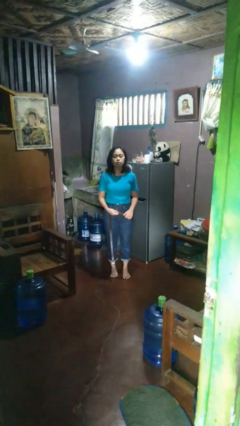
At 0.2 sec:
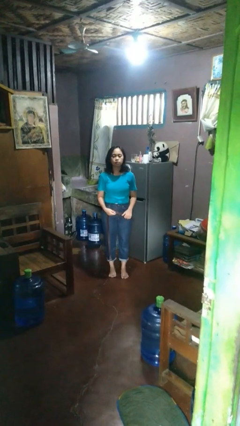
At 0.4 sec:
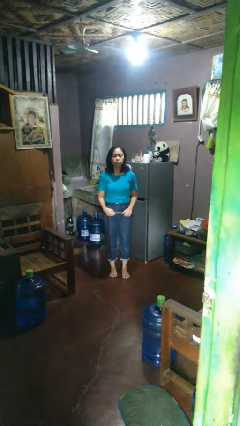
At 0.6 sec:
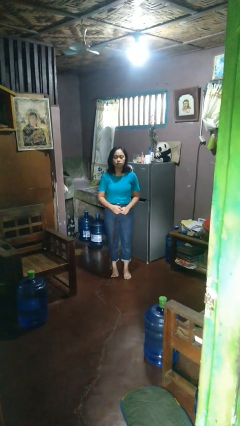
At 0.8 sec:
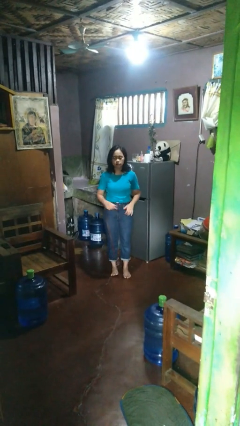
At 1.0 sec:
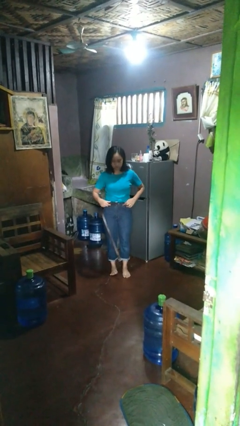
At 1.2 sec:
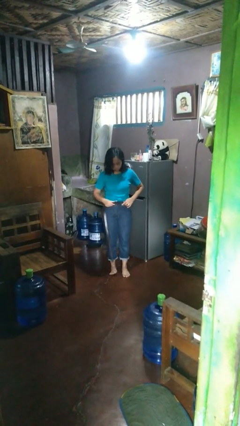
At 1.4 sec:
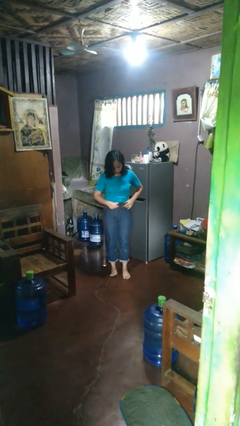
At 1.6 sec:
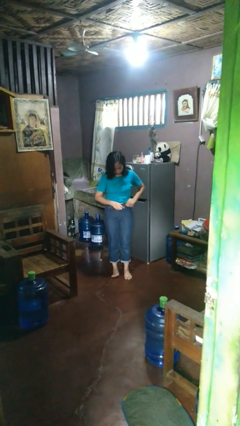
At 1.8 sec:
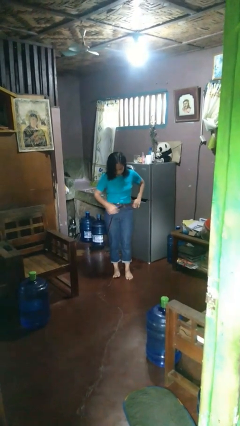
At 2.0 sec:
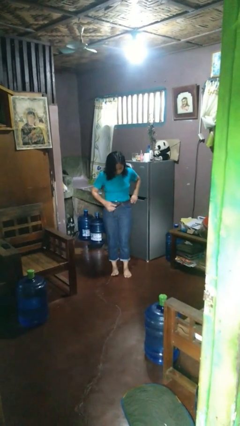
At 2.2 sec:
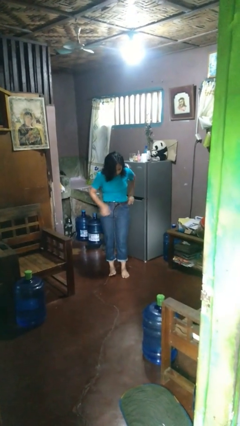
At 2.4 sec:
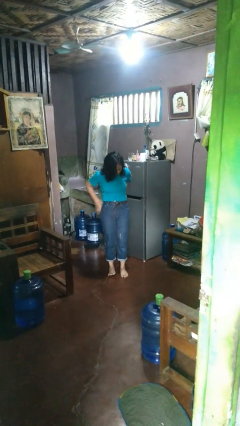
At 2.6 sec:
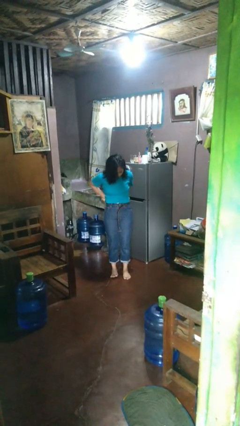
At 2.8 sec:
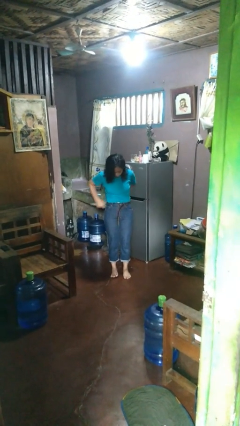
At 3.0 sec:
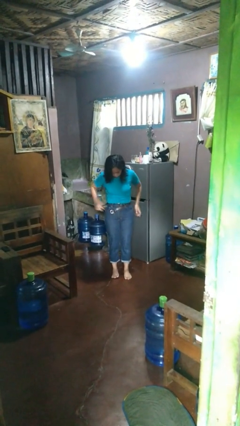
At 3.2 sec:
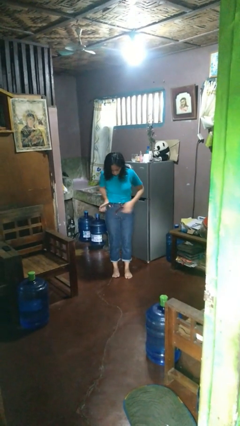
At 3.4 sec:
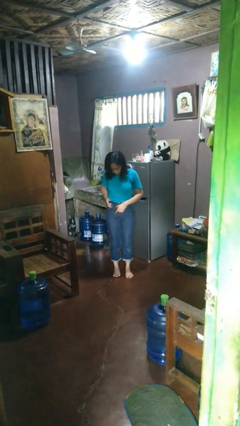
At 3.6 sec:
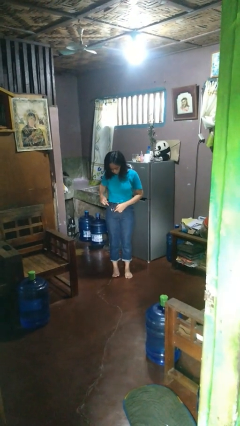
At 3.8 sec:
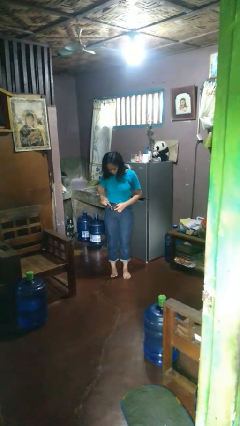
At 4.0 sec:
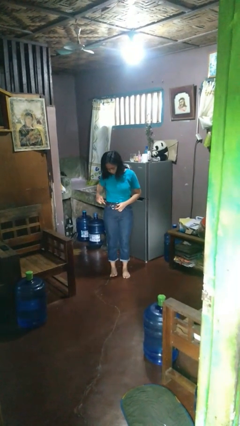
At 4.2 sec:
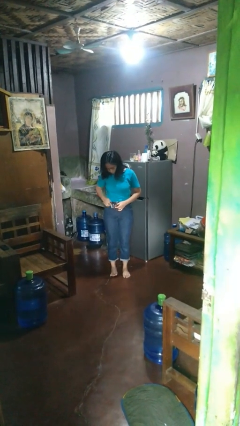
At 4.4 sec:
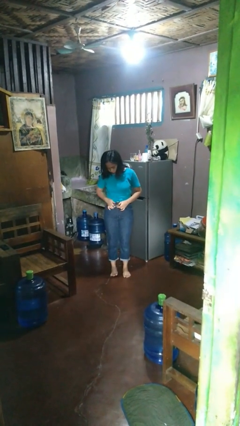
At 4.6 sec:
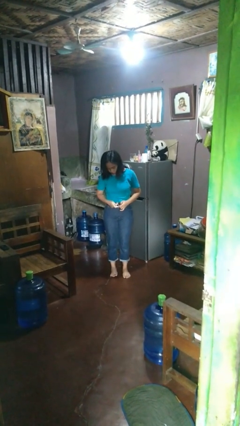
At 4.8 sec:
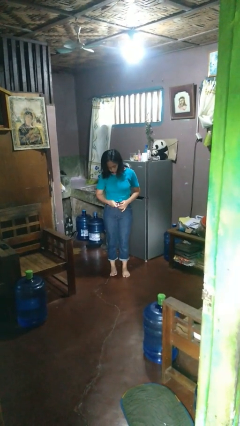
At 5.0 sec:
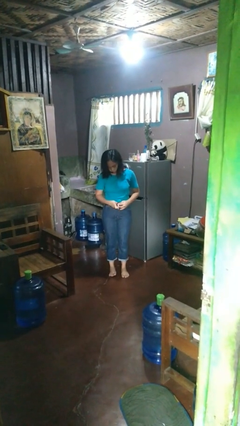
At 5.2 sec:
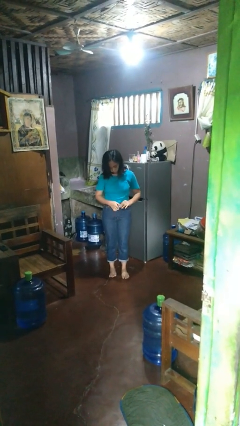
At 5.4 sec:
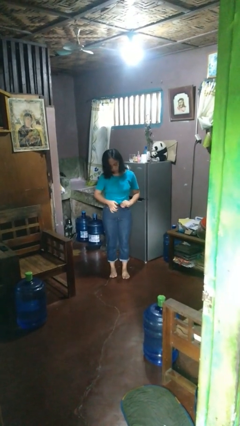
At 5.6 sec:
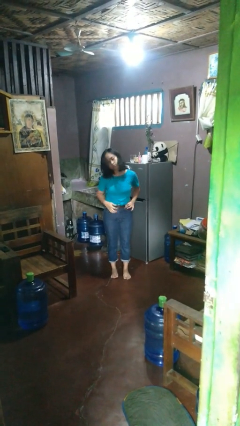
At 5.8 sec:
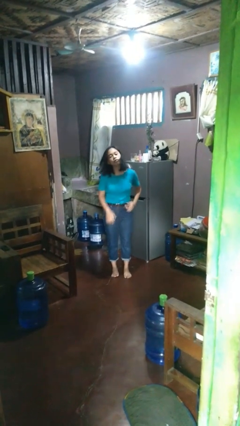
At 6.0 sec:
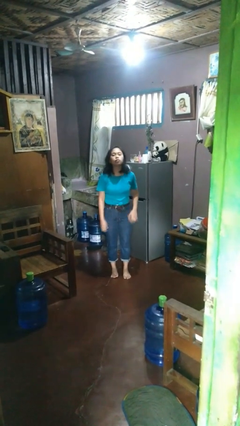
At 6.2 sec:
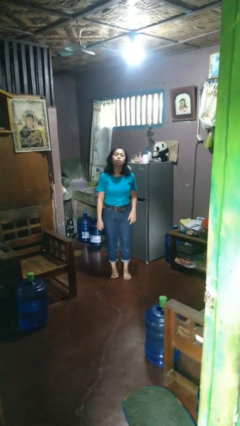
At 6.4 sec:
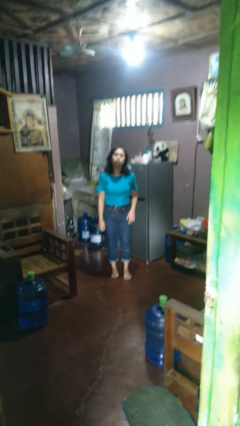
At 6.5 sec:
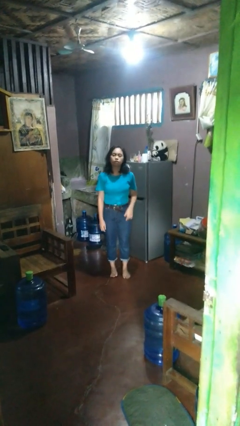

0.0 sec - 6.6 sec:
person puts on belt

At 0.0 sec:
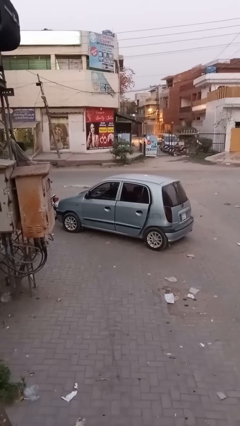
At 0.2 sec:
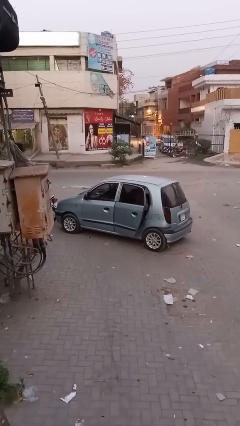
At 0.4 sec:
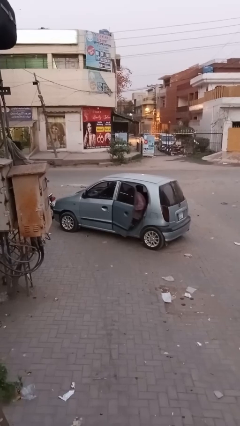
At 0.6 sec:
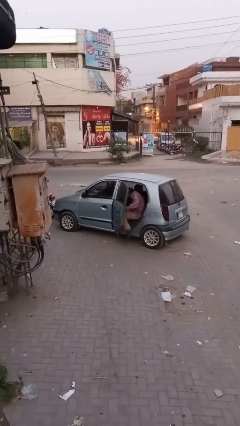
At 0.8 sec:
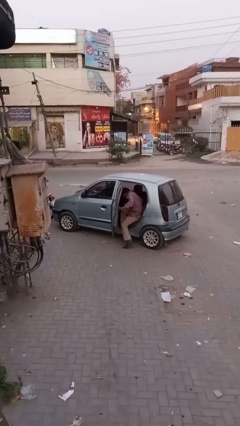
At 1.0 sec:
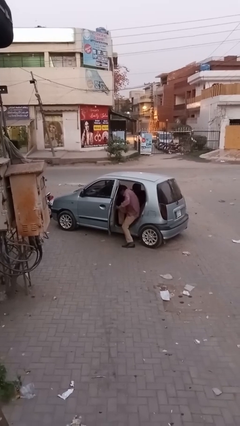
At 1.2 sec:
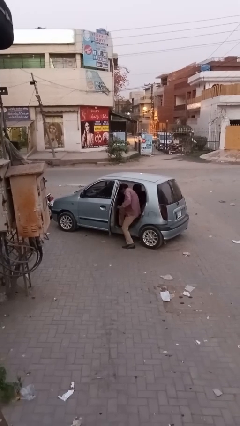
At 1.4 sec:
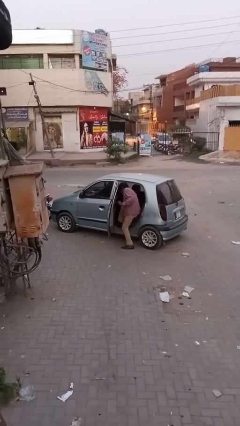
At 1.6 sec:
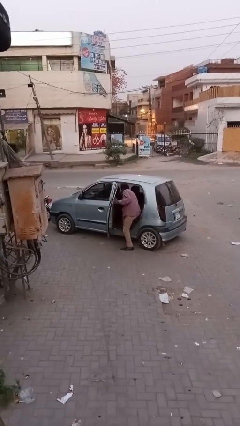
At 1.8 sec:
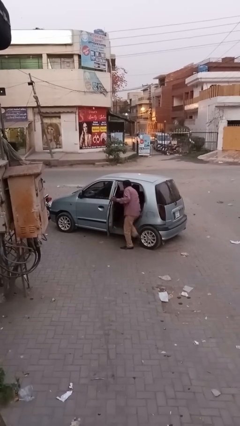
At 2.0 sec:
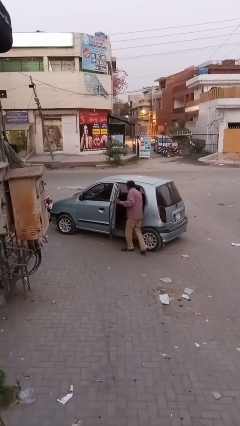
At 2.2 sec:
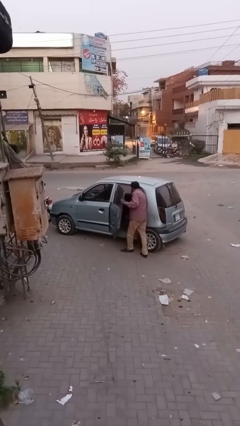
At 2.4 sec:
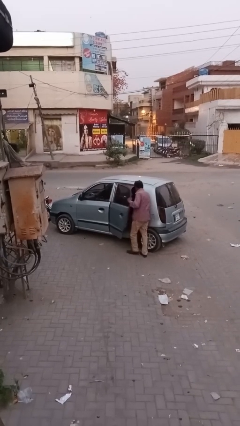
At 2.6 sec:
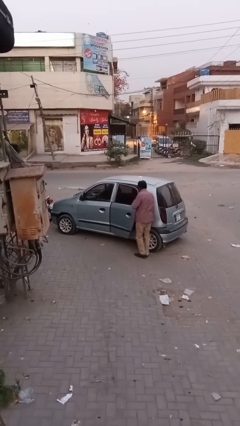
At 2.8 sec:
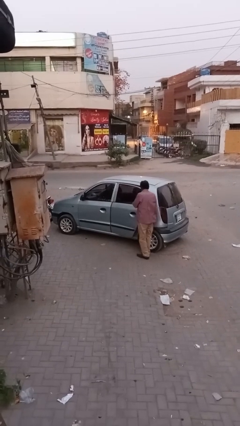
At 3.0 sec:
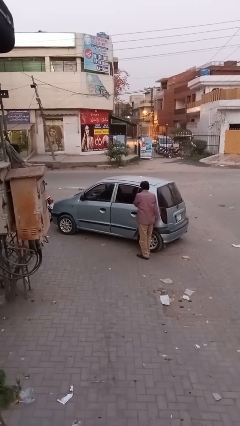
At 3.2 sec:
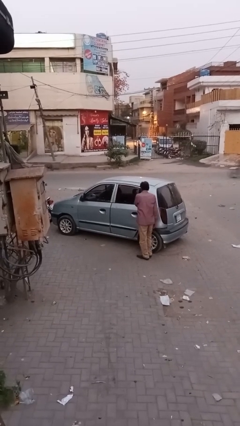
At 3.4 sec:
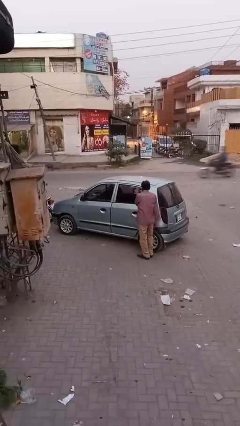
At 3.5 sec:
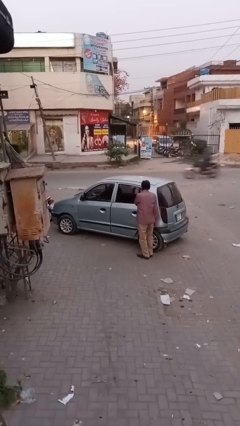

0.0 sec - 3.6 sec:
car drops off person

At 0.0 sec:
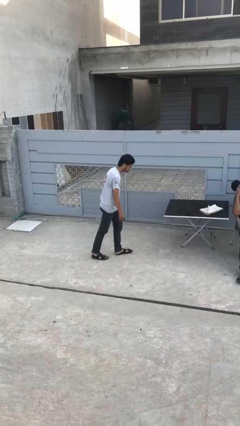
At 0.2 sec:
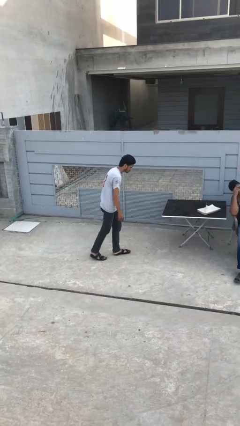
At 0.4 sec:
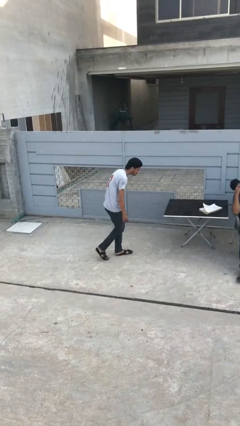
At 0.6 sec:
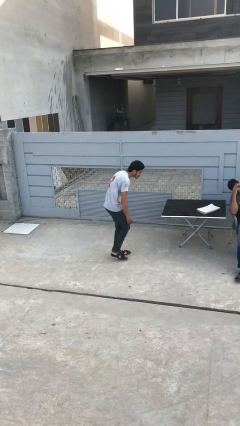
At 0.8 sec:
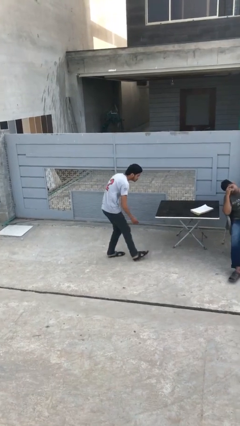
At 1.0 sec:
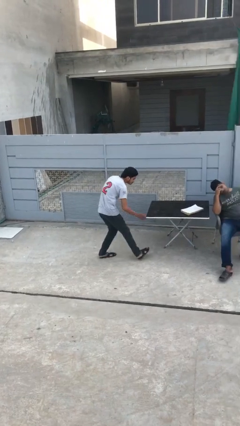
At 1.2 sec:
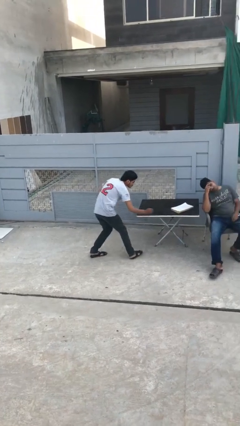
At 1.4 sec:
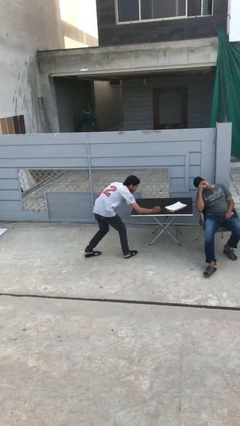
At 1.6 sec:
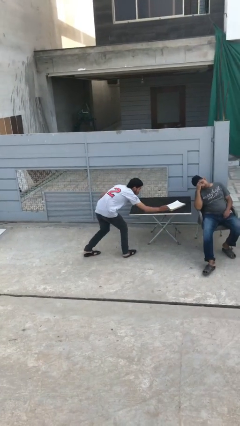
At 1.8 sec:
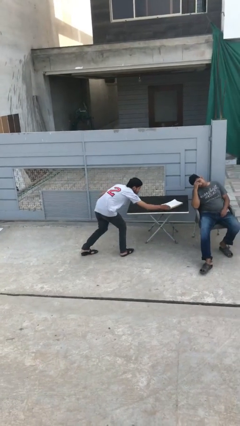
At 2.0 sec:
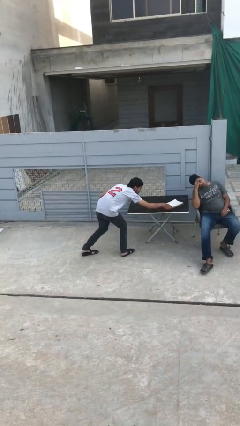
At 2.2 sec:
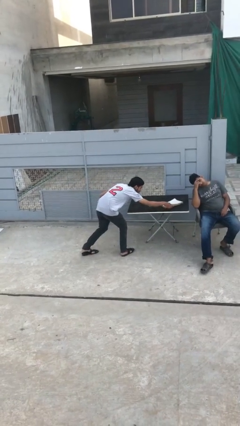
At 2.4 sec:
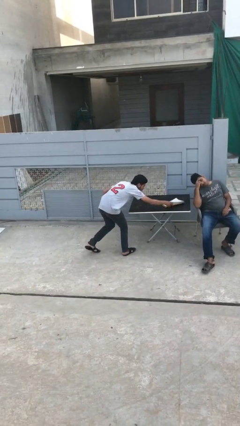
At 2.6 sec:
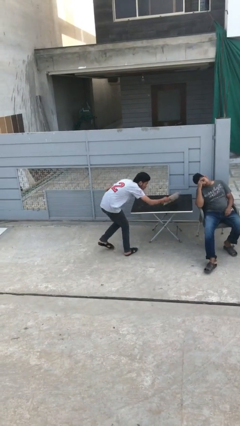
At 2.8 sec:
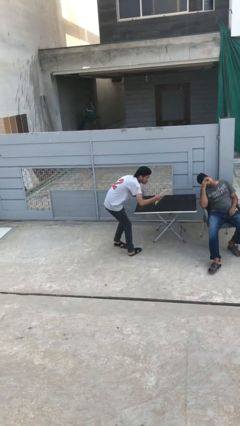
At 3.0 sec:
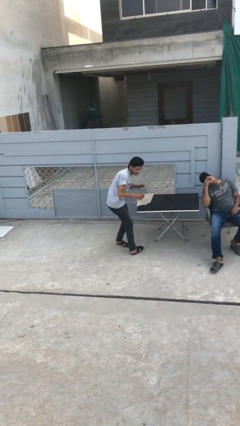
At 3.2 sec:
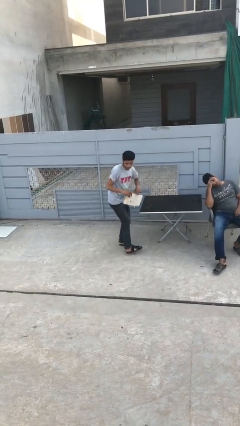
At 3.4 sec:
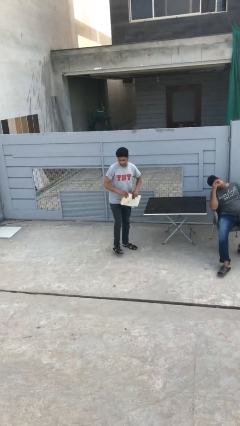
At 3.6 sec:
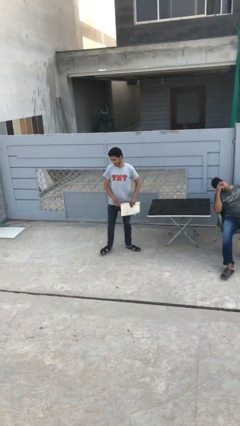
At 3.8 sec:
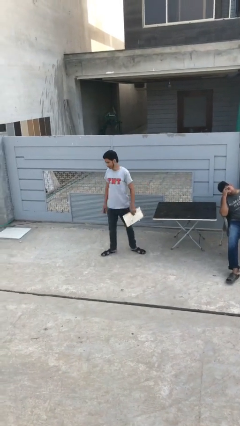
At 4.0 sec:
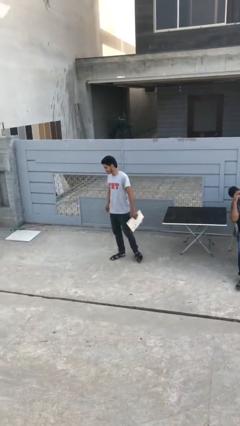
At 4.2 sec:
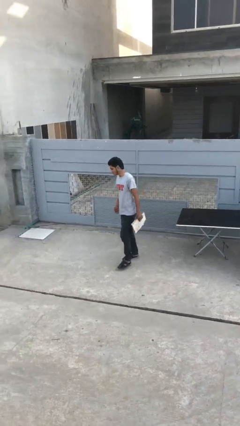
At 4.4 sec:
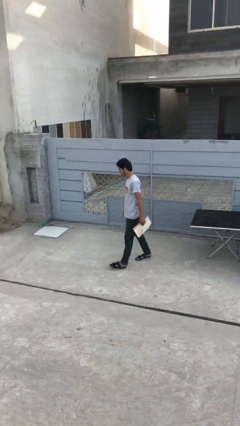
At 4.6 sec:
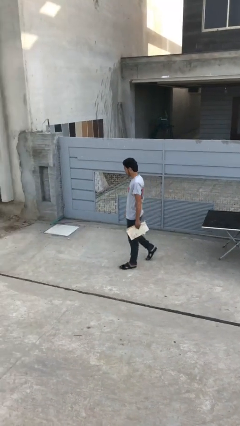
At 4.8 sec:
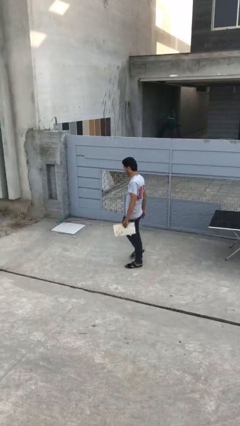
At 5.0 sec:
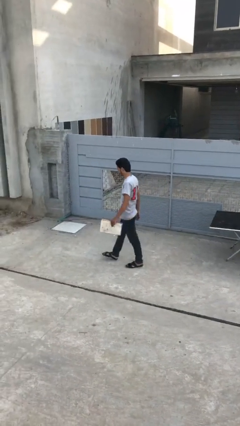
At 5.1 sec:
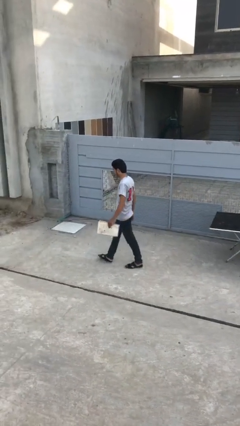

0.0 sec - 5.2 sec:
person steals object from person

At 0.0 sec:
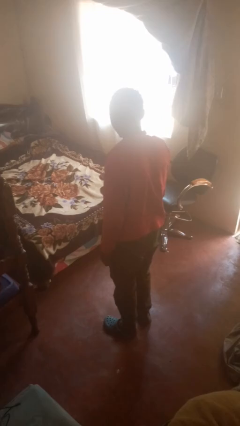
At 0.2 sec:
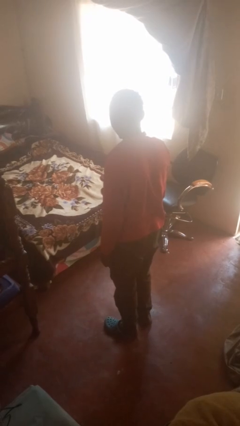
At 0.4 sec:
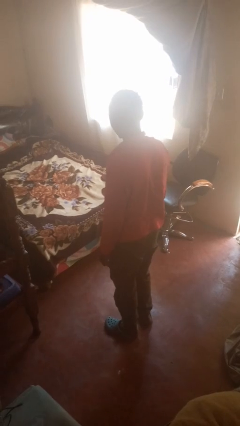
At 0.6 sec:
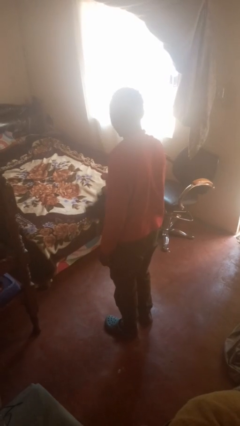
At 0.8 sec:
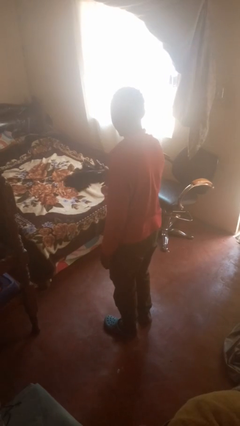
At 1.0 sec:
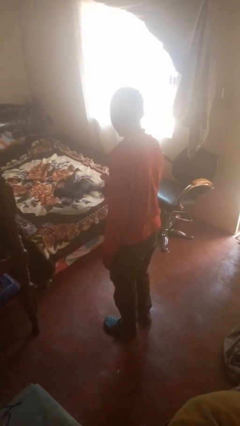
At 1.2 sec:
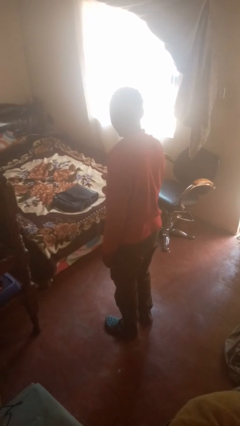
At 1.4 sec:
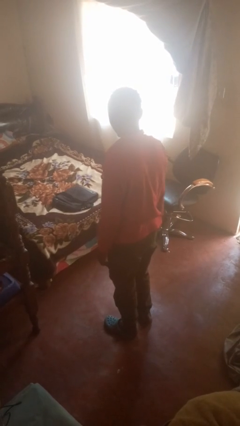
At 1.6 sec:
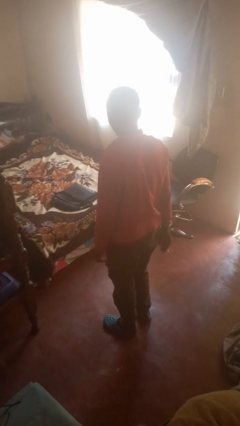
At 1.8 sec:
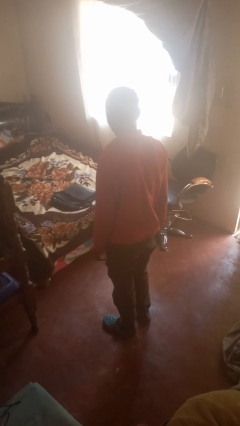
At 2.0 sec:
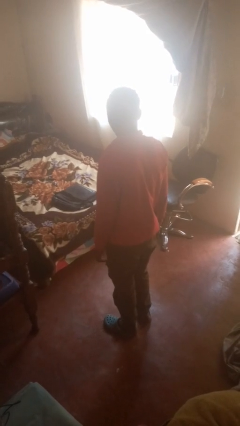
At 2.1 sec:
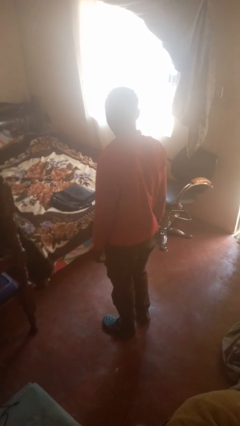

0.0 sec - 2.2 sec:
person throws object on bed
